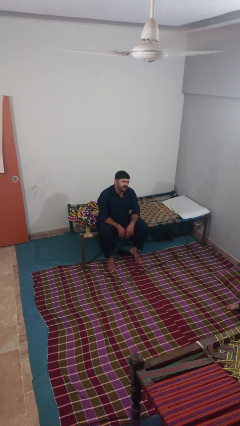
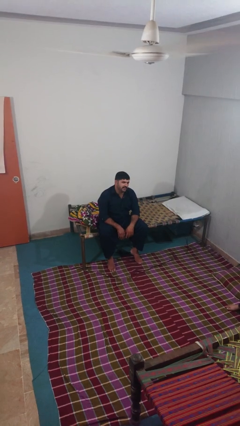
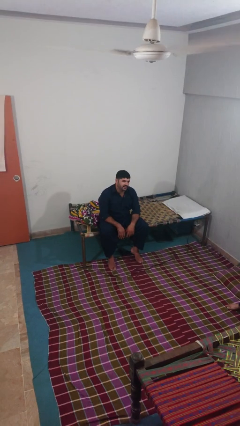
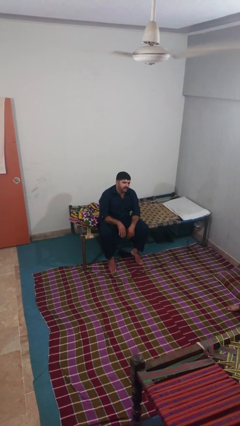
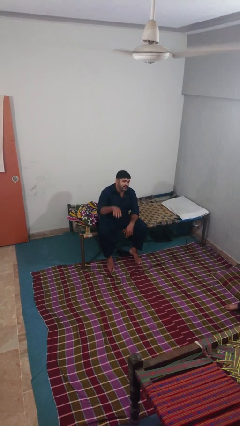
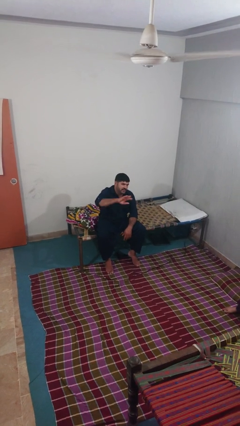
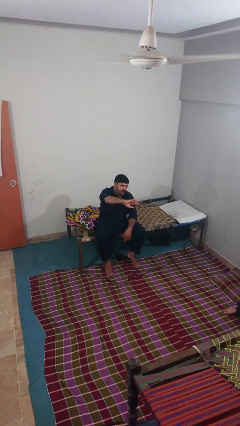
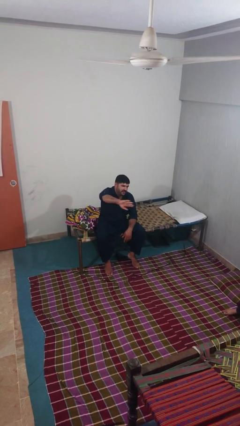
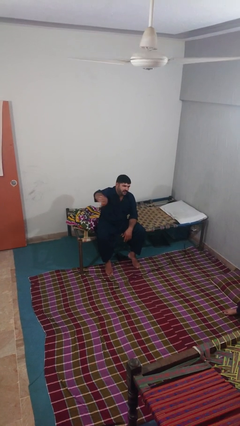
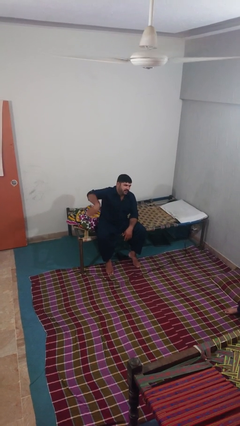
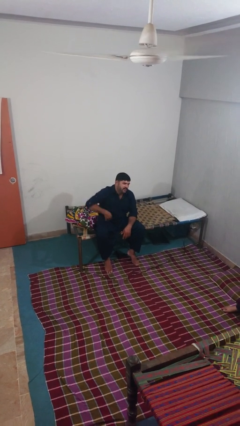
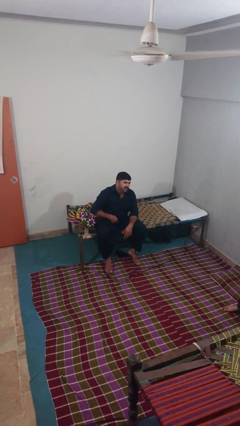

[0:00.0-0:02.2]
person gestures swipe right

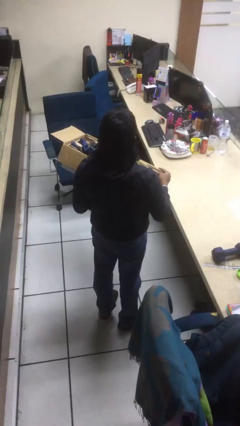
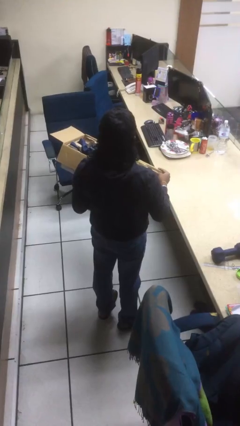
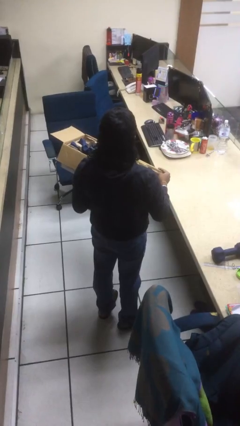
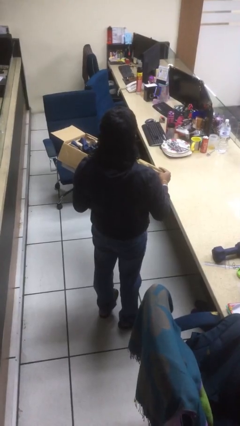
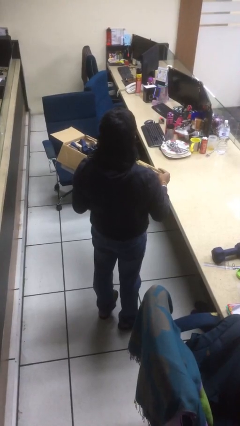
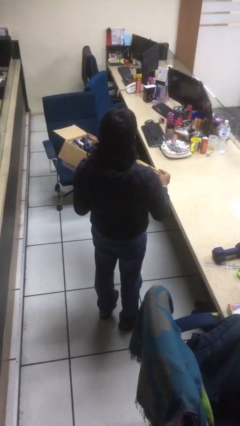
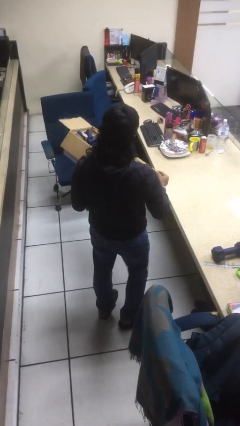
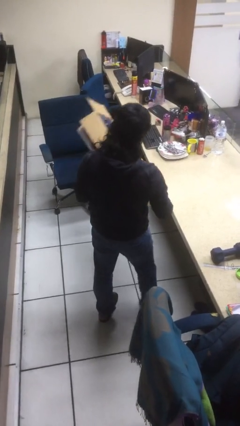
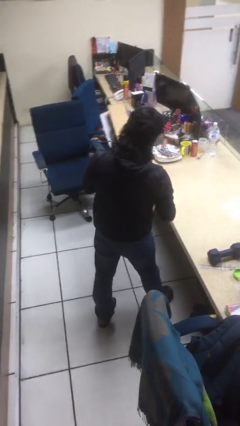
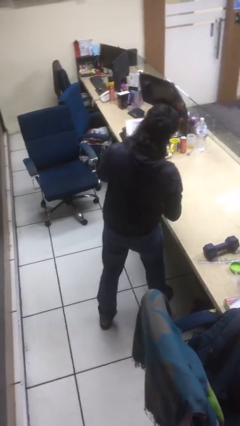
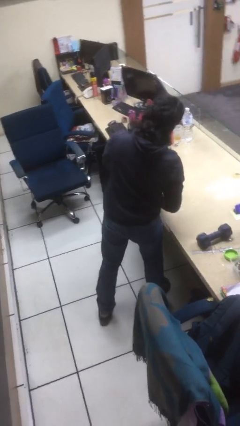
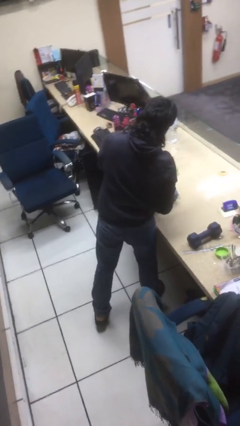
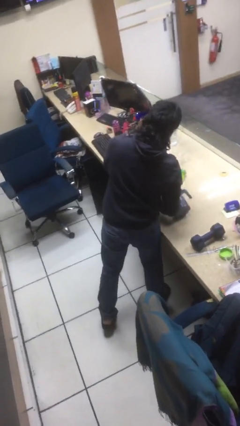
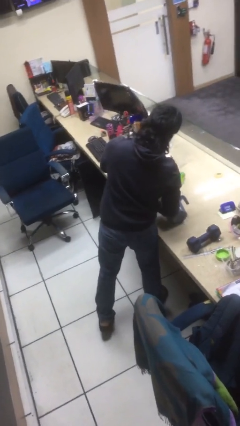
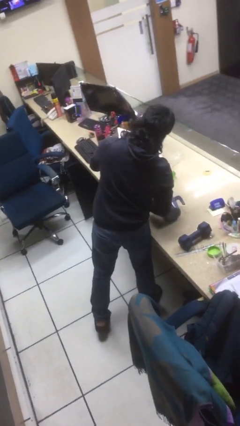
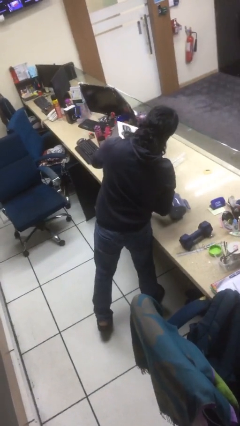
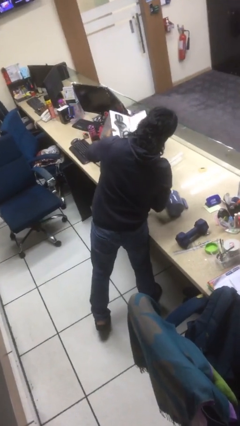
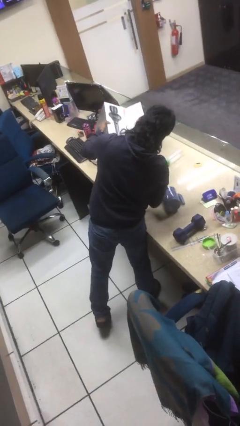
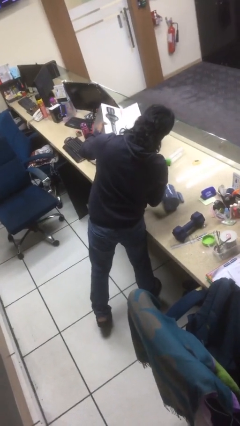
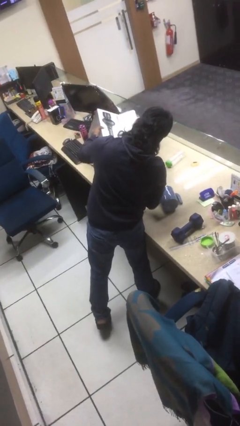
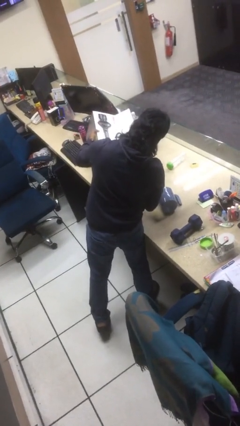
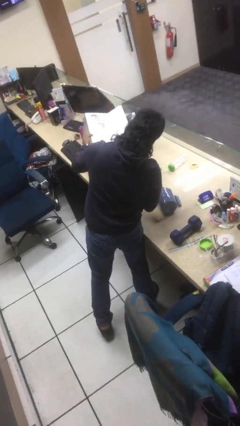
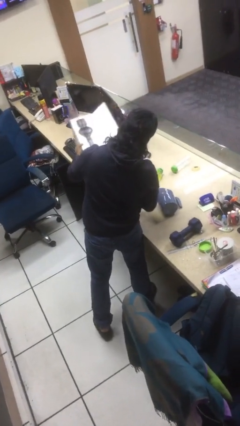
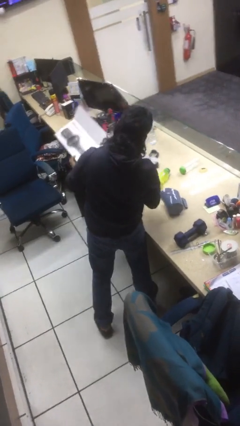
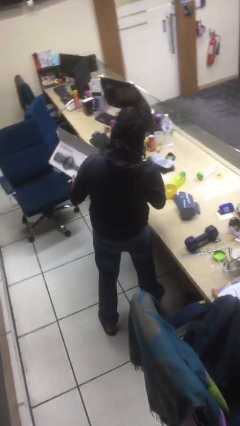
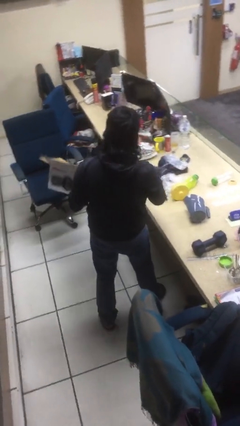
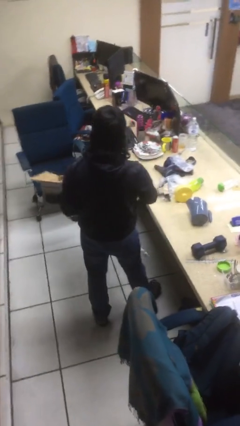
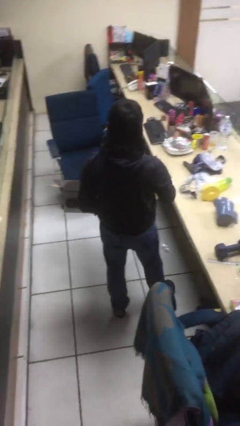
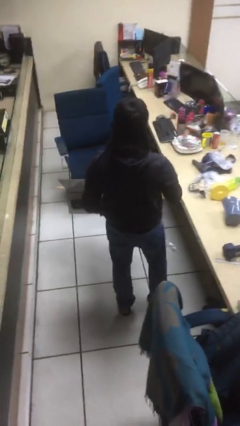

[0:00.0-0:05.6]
person unloads box onto table

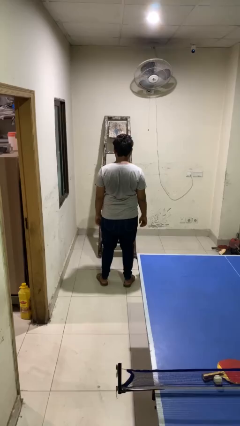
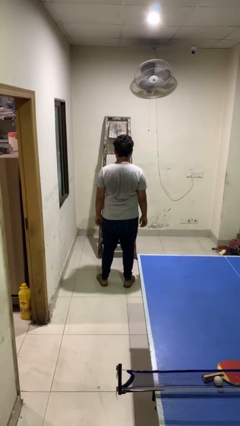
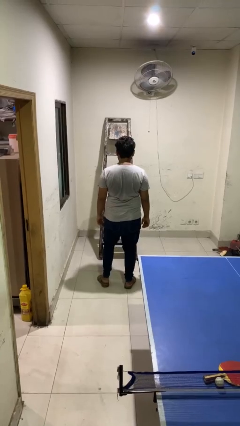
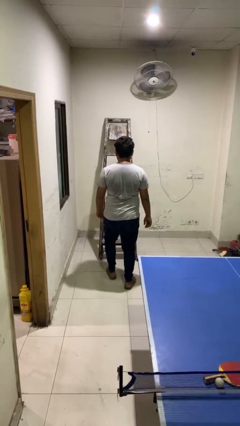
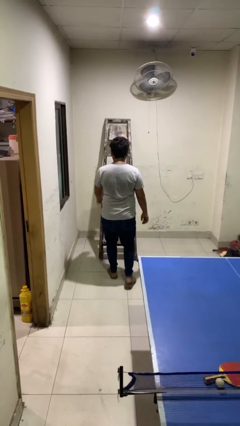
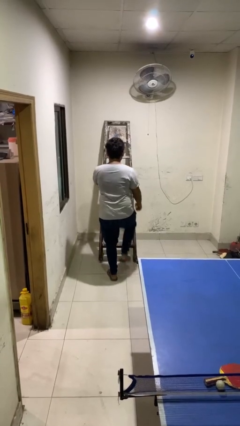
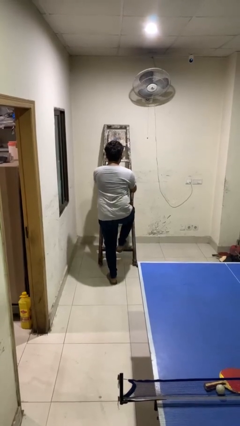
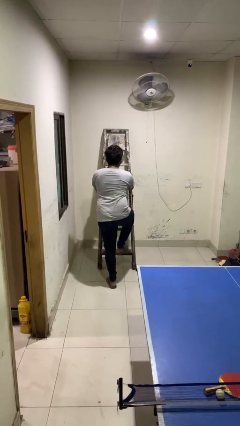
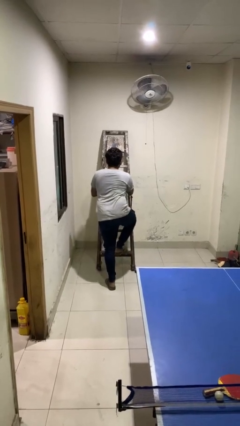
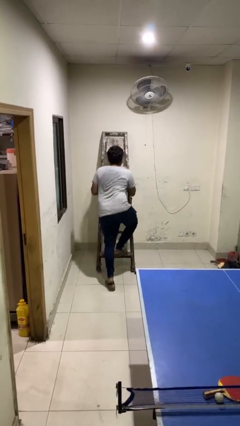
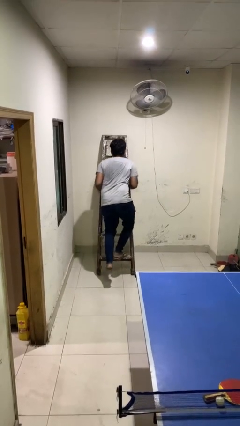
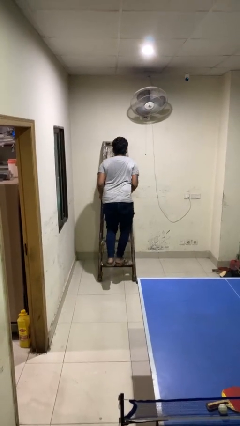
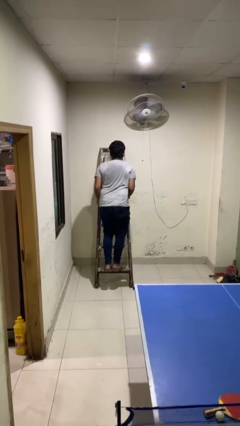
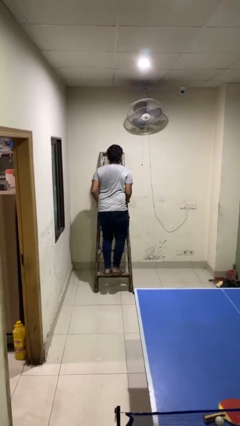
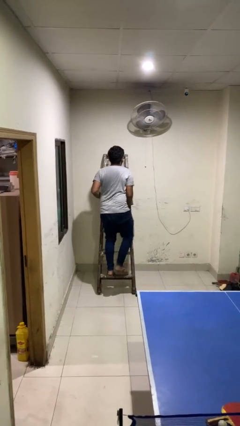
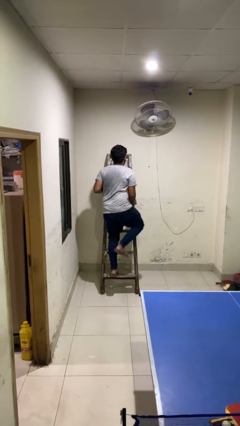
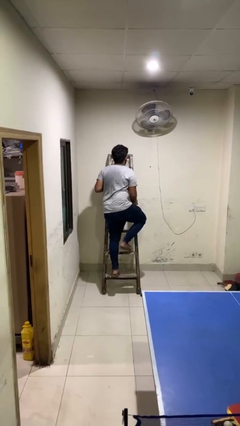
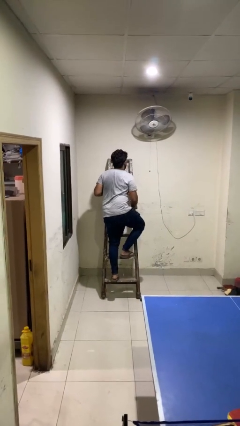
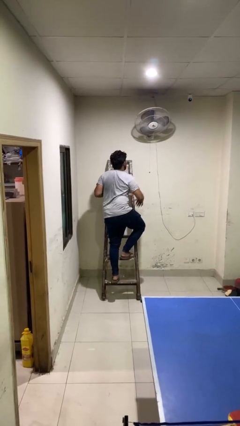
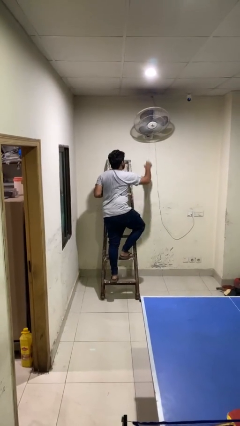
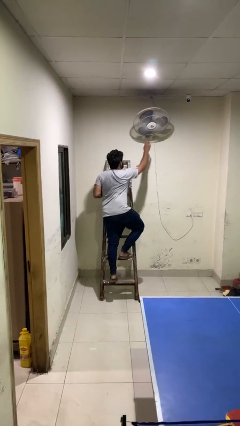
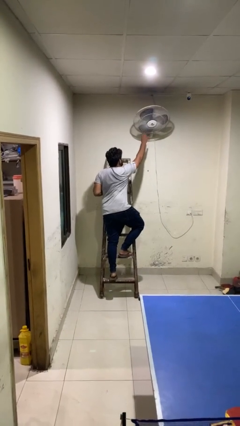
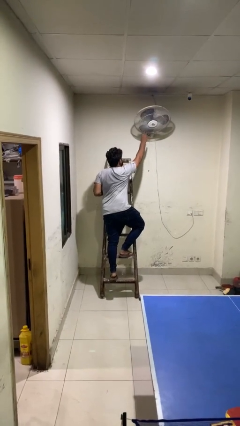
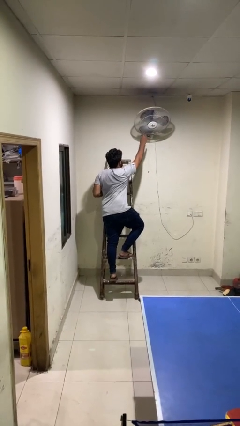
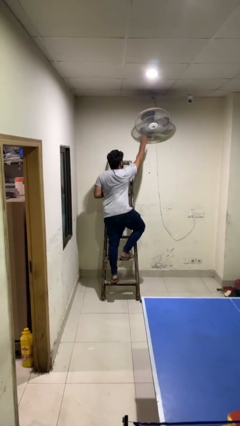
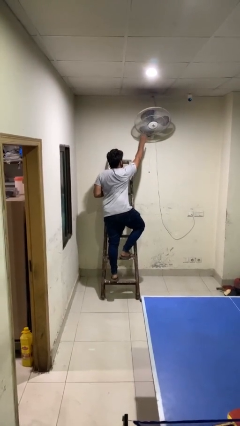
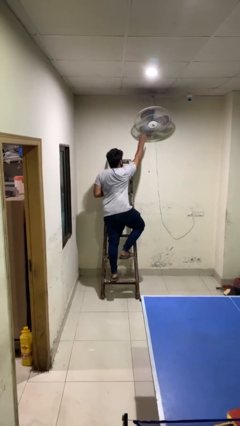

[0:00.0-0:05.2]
person climbs up ladder

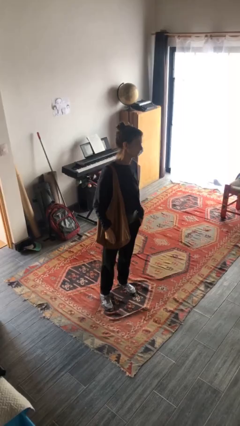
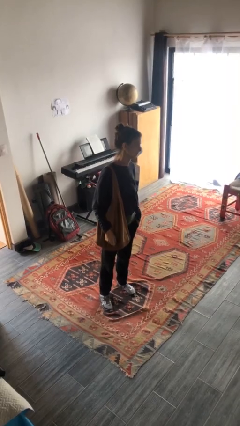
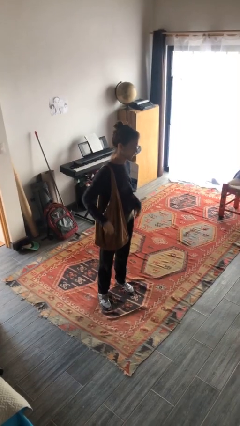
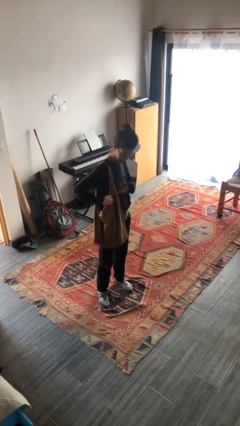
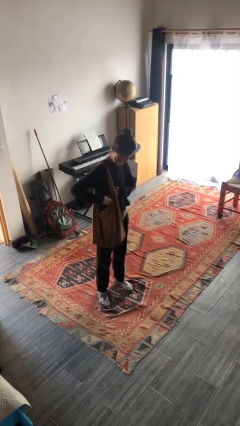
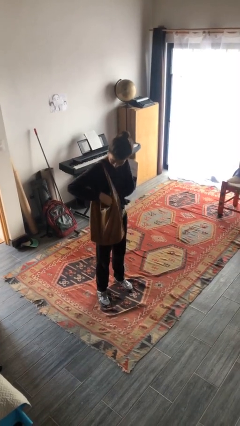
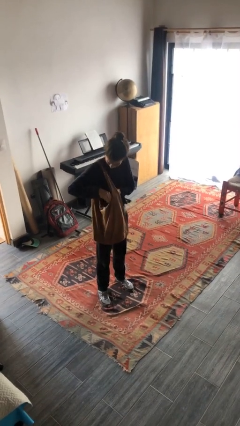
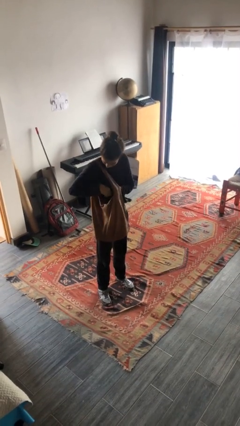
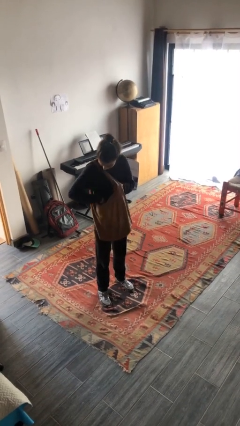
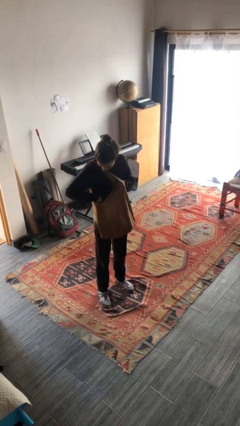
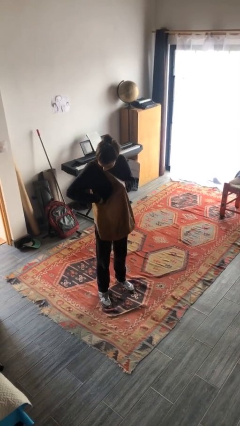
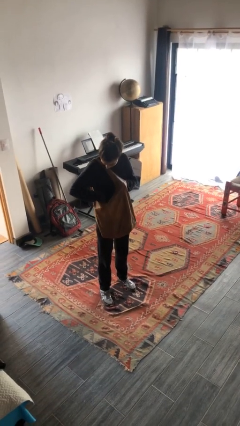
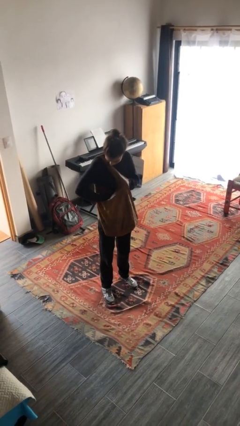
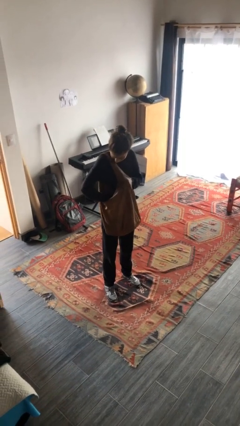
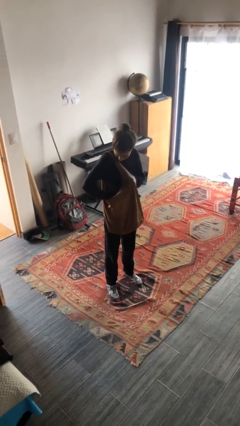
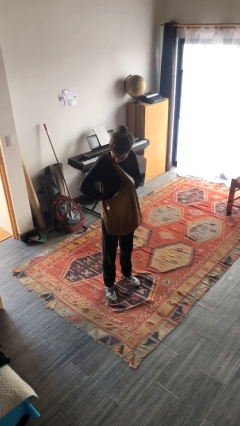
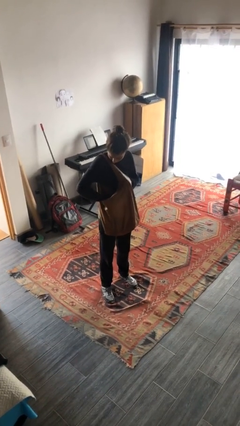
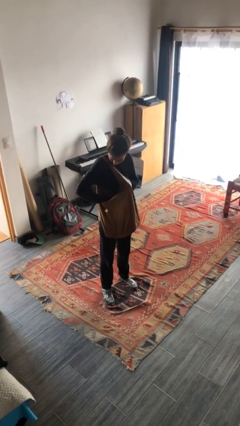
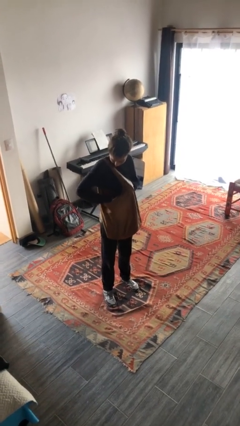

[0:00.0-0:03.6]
person searches in purse

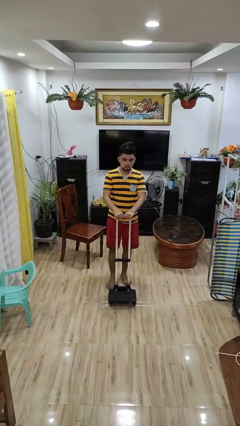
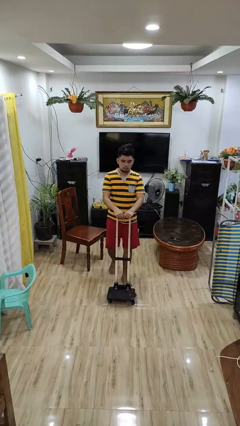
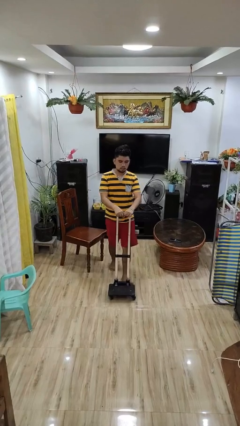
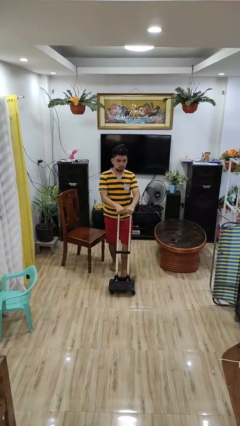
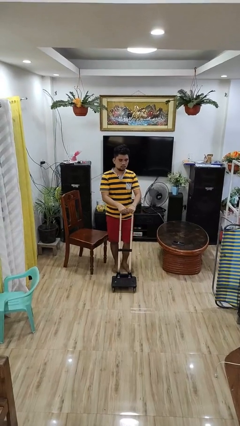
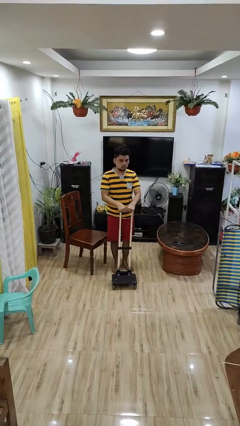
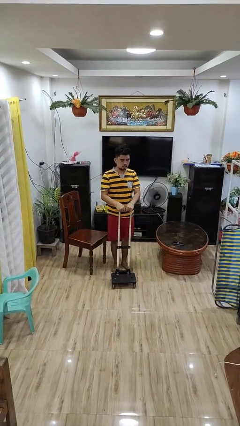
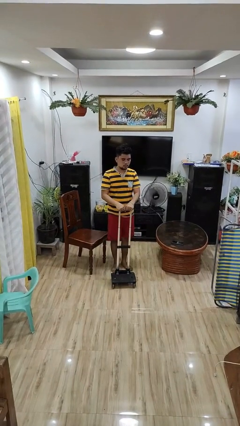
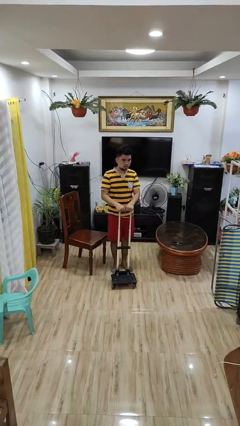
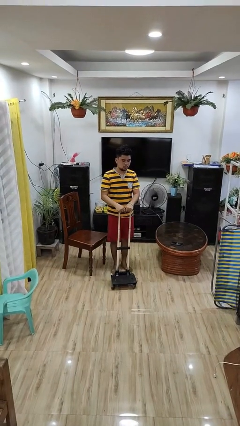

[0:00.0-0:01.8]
person pulls wheeled cart
